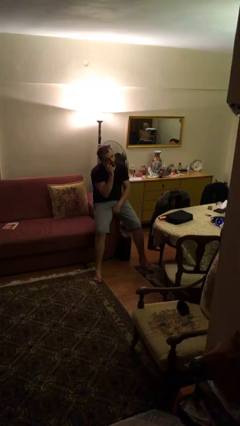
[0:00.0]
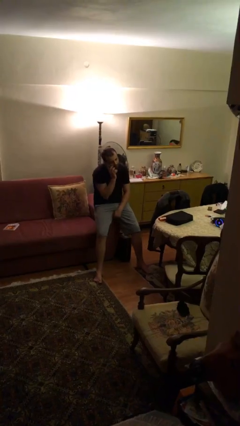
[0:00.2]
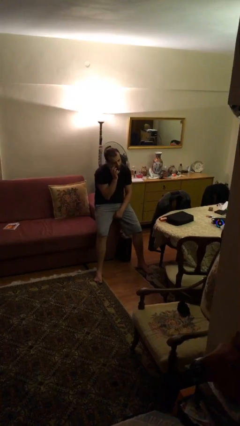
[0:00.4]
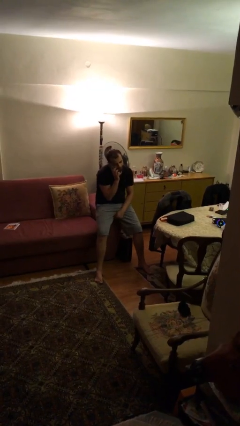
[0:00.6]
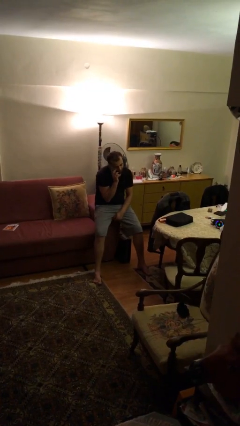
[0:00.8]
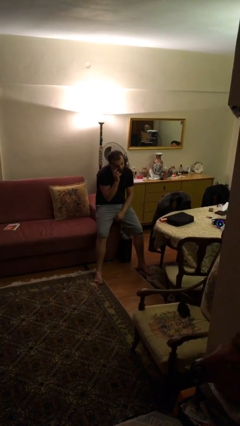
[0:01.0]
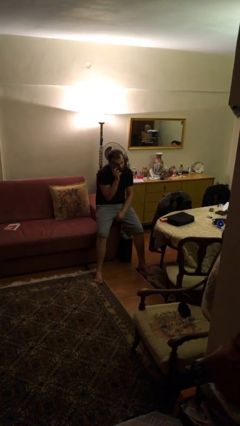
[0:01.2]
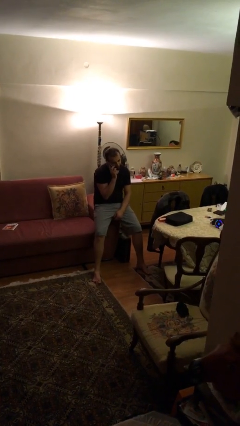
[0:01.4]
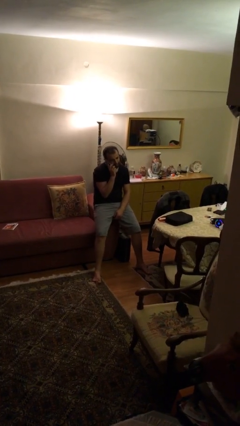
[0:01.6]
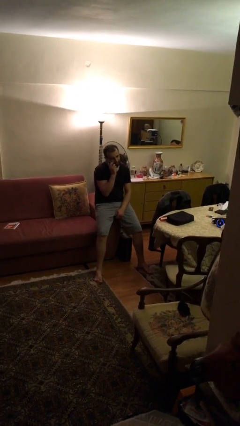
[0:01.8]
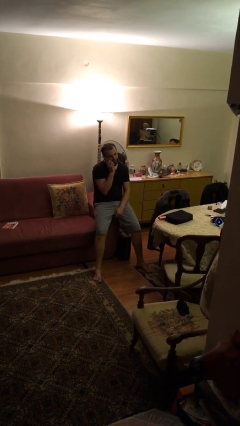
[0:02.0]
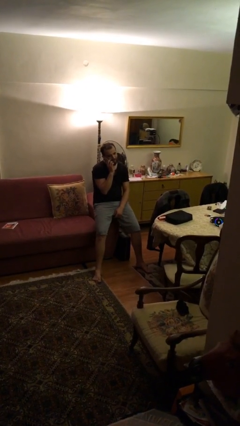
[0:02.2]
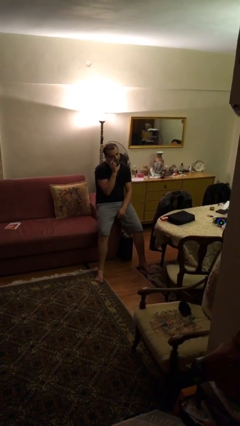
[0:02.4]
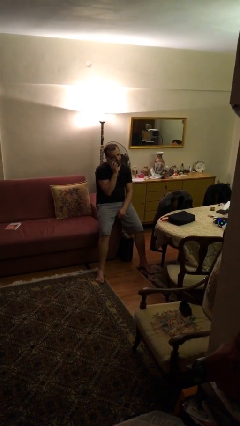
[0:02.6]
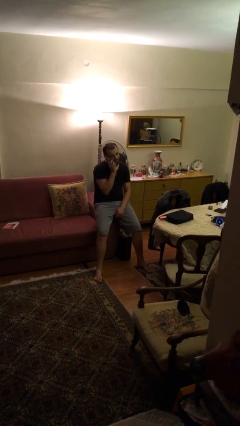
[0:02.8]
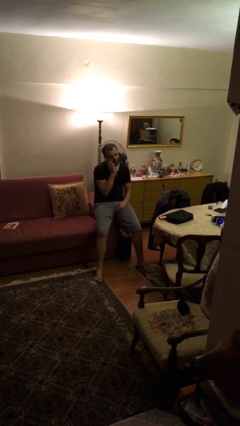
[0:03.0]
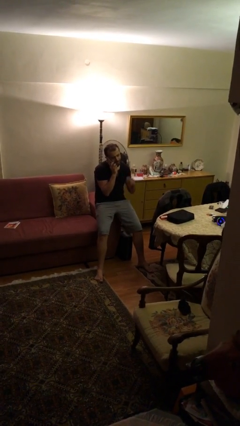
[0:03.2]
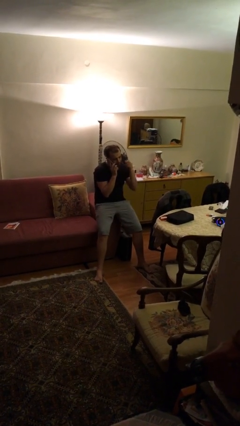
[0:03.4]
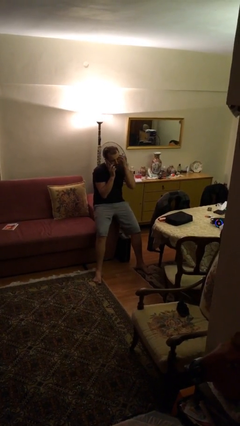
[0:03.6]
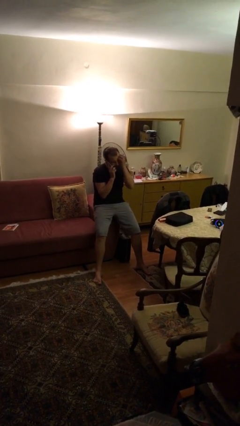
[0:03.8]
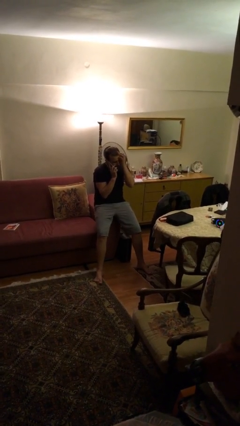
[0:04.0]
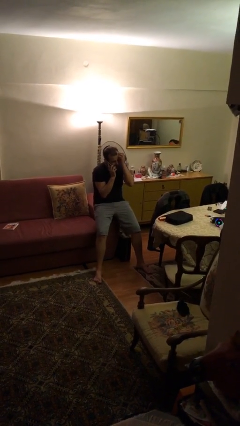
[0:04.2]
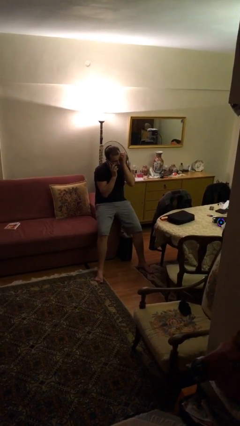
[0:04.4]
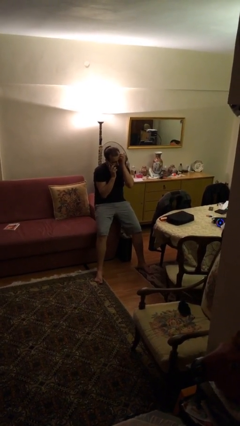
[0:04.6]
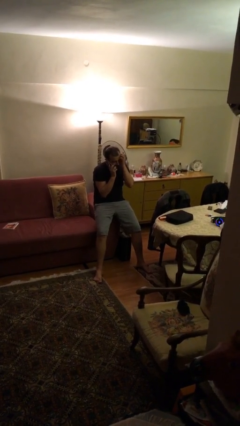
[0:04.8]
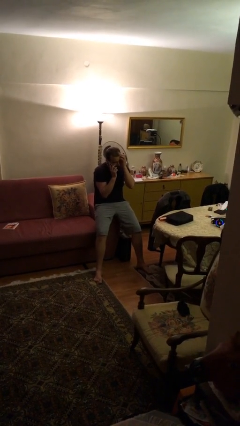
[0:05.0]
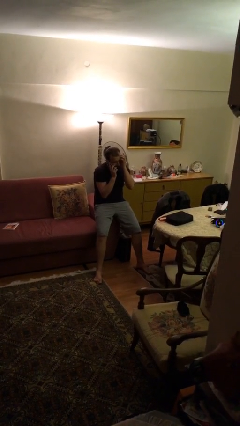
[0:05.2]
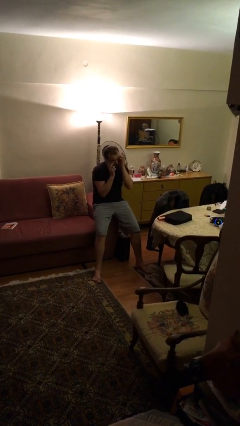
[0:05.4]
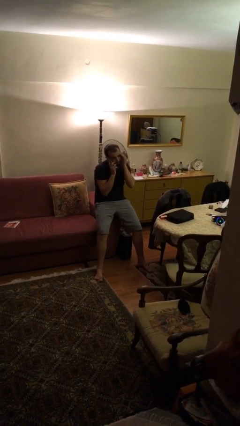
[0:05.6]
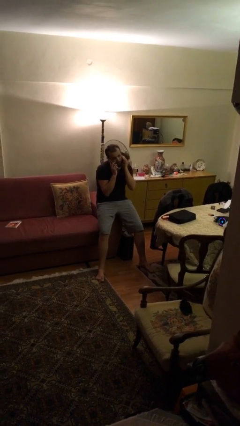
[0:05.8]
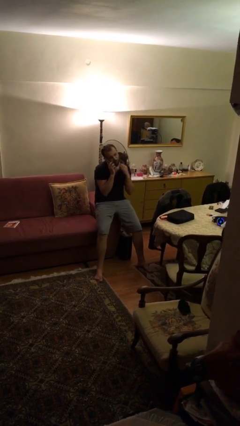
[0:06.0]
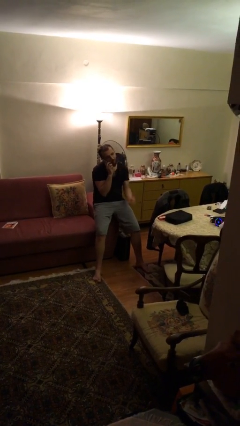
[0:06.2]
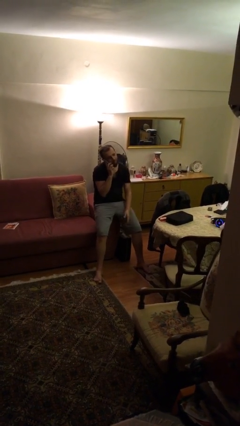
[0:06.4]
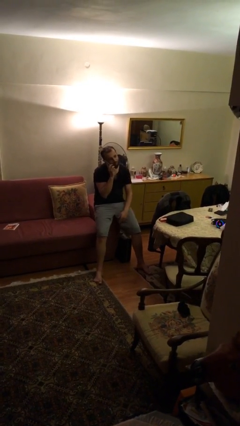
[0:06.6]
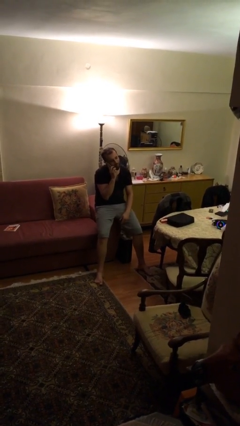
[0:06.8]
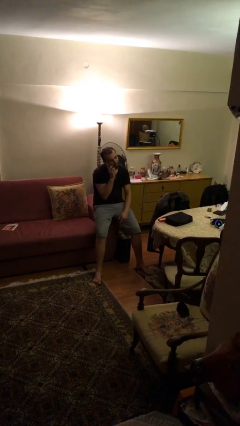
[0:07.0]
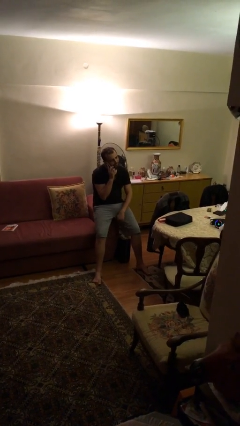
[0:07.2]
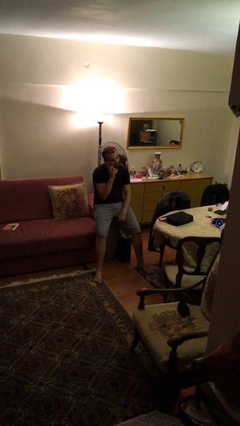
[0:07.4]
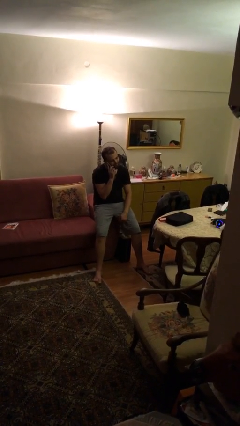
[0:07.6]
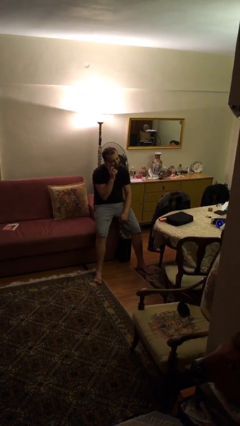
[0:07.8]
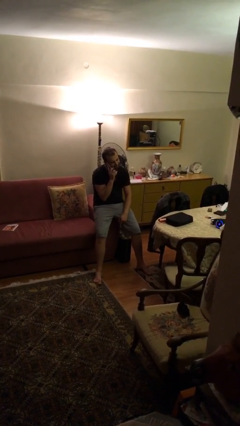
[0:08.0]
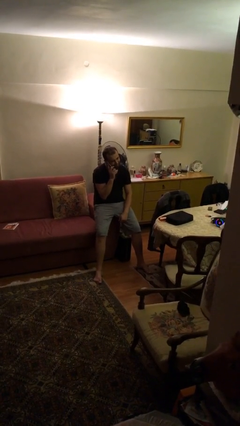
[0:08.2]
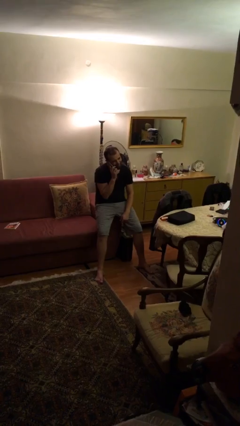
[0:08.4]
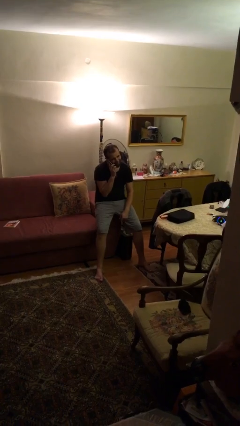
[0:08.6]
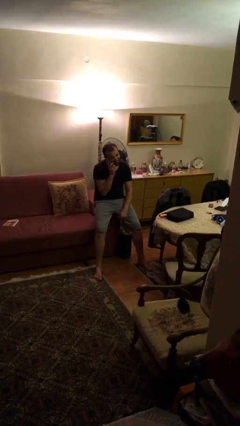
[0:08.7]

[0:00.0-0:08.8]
person talks on phone

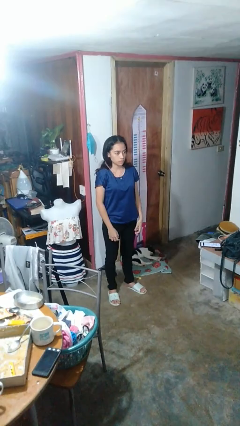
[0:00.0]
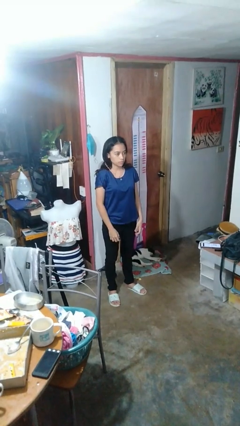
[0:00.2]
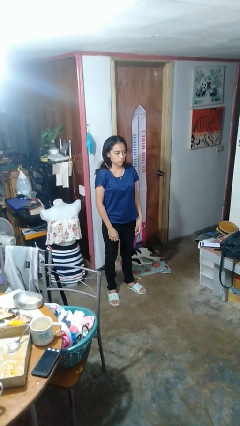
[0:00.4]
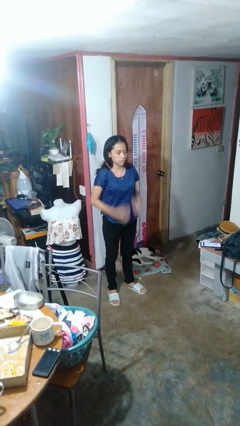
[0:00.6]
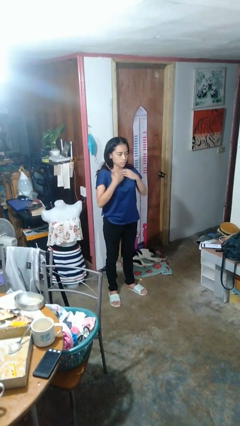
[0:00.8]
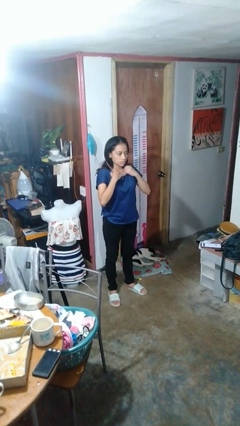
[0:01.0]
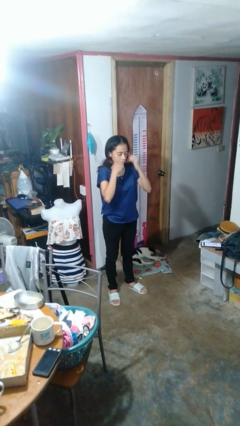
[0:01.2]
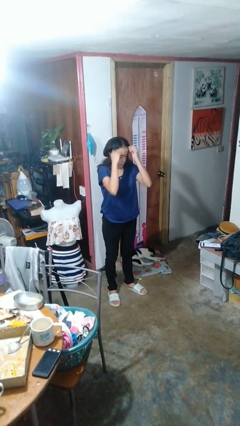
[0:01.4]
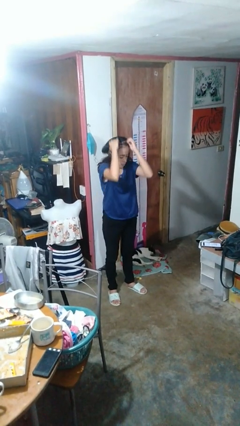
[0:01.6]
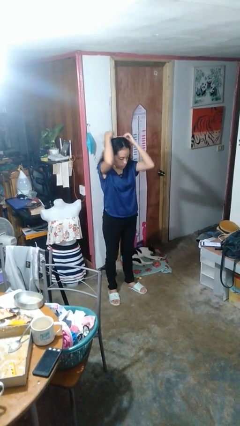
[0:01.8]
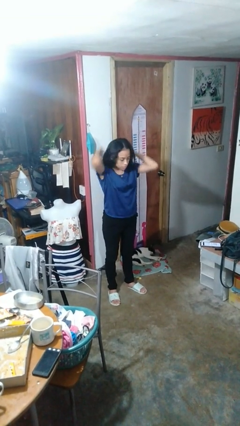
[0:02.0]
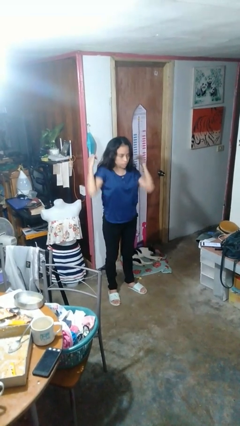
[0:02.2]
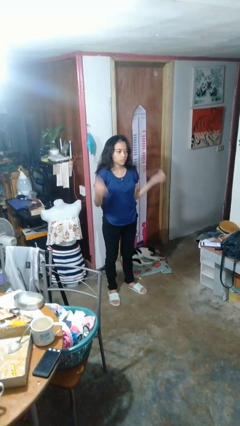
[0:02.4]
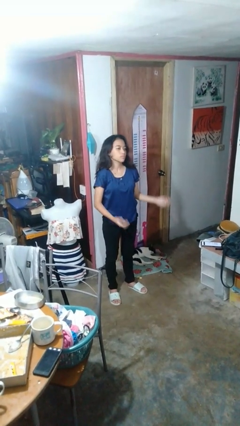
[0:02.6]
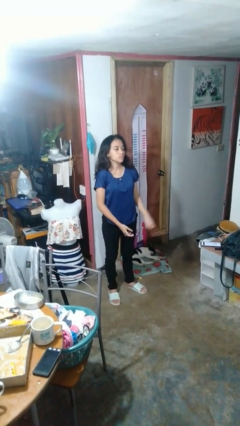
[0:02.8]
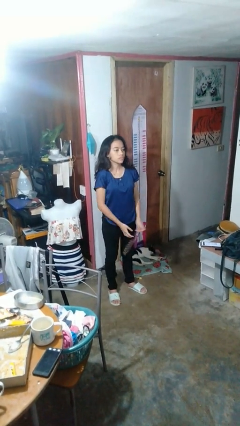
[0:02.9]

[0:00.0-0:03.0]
person takes off necklace

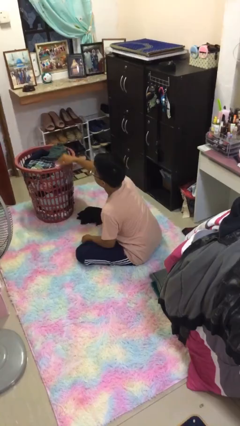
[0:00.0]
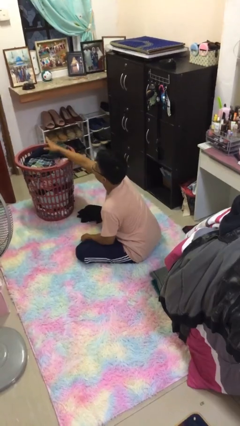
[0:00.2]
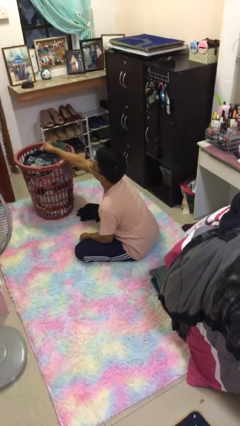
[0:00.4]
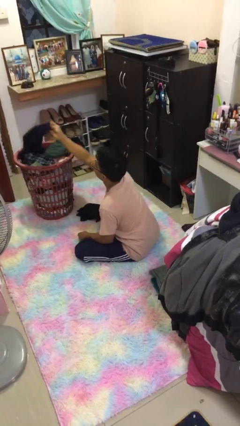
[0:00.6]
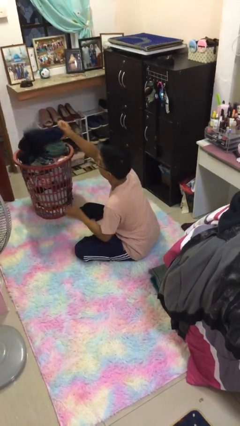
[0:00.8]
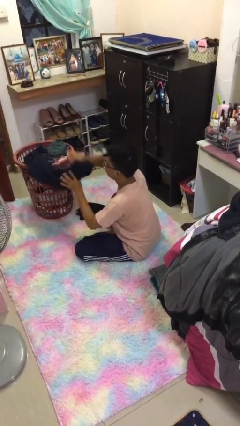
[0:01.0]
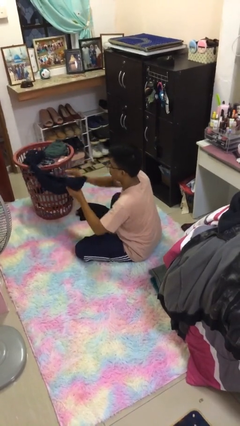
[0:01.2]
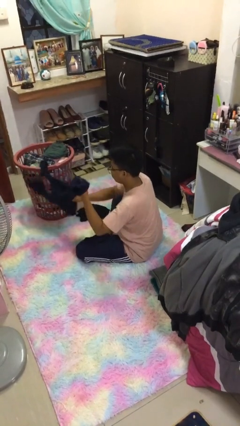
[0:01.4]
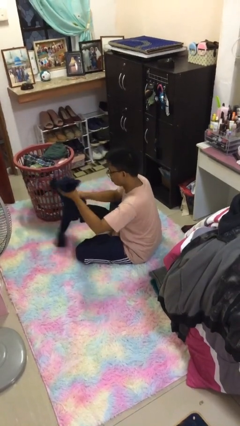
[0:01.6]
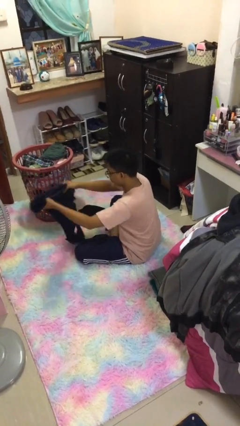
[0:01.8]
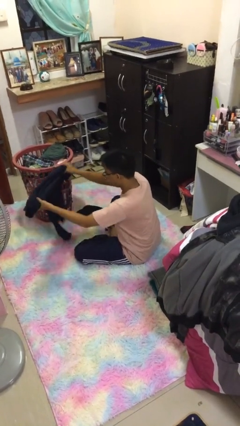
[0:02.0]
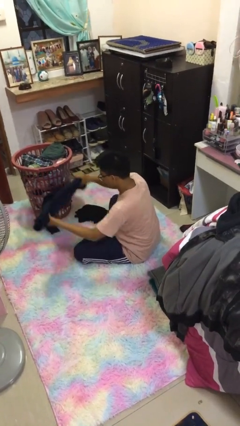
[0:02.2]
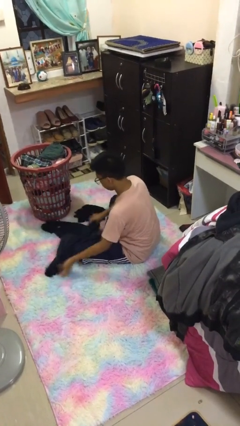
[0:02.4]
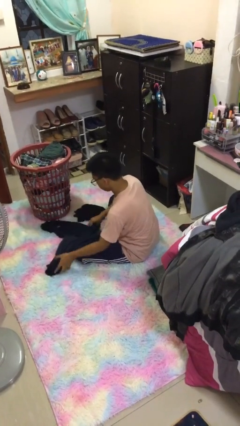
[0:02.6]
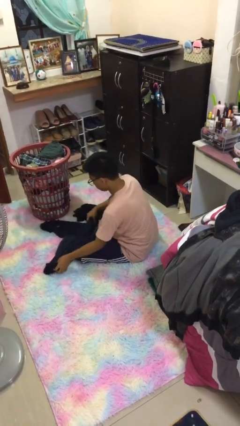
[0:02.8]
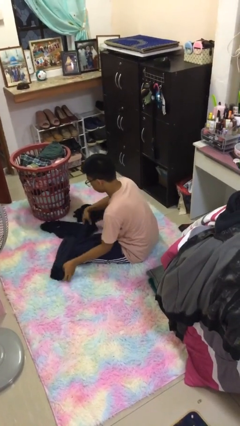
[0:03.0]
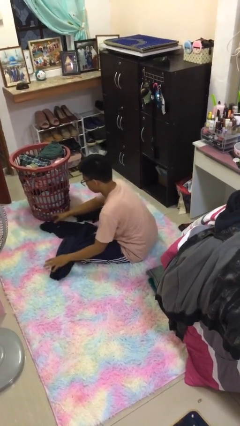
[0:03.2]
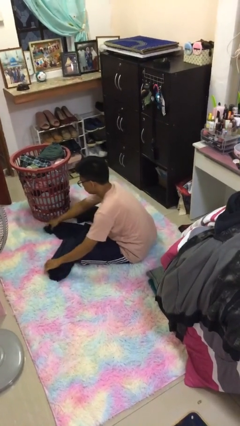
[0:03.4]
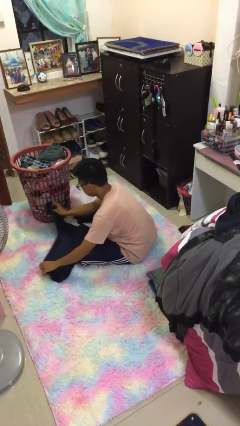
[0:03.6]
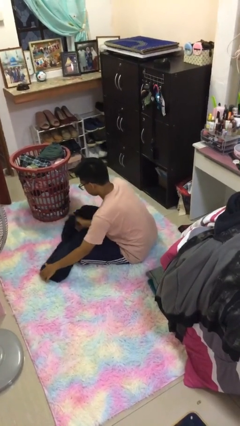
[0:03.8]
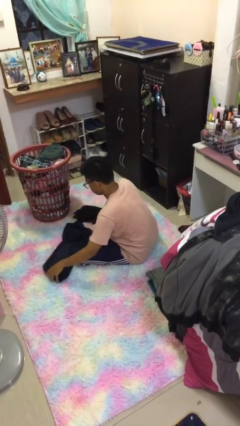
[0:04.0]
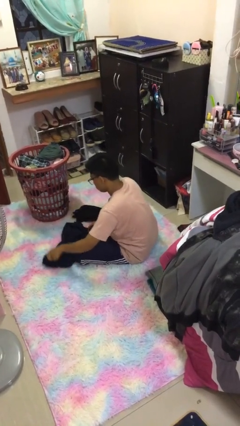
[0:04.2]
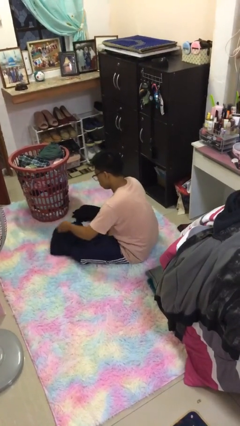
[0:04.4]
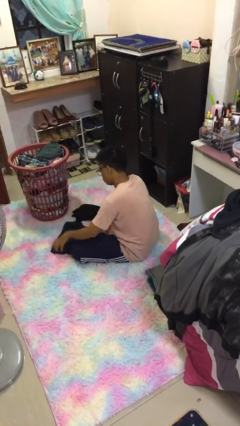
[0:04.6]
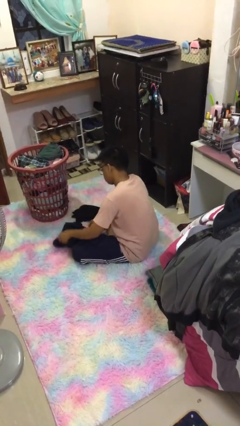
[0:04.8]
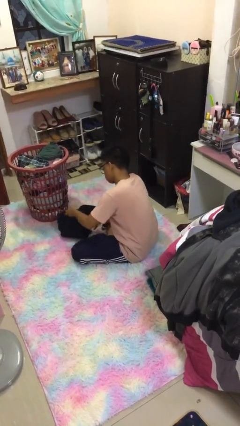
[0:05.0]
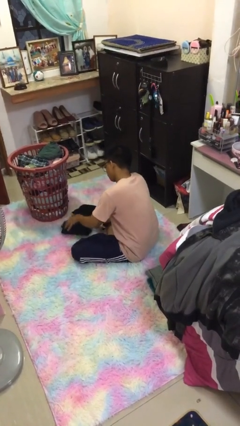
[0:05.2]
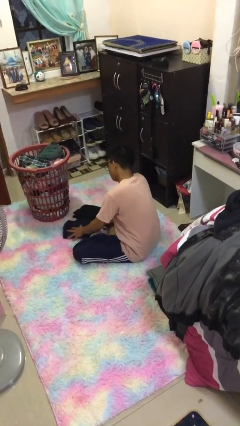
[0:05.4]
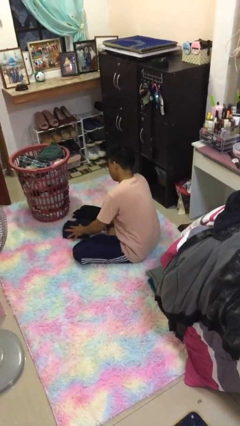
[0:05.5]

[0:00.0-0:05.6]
person folds shirt

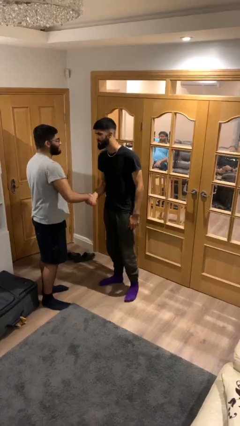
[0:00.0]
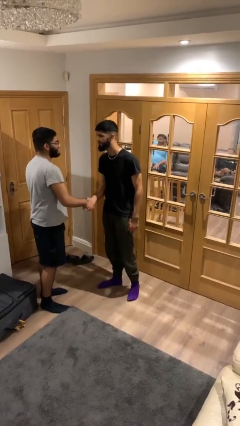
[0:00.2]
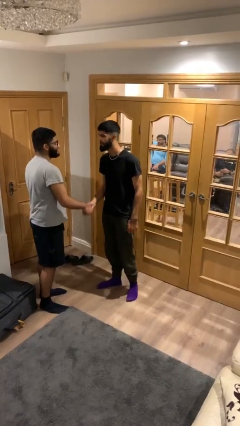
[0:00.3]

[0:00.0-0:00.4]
person talks to person

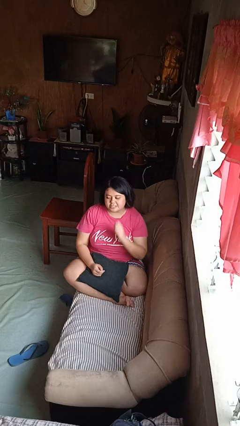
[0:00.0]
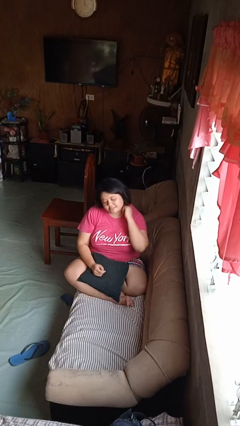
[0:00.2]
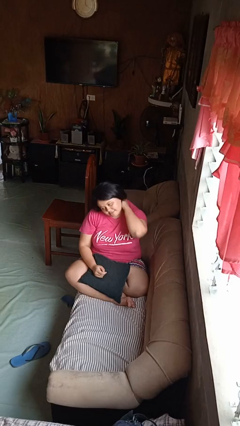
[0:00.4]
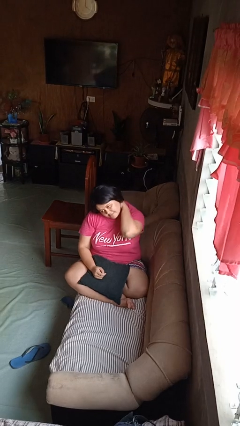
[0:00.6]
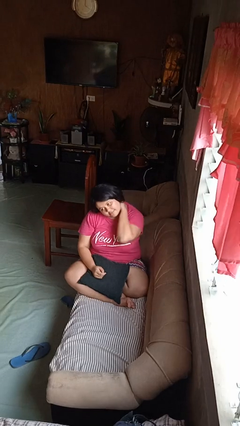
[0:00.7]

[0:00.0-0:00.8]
person rubs neck
